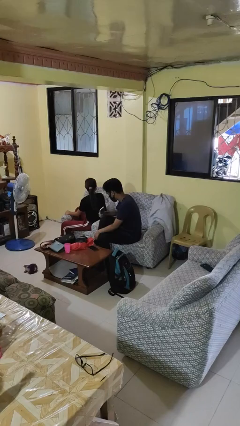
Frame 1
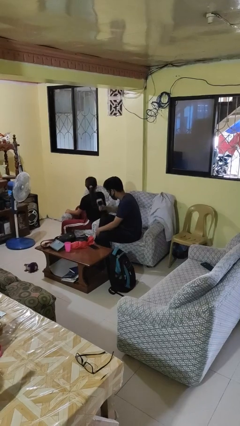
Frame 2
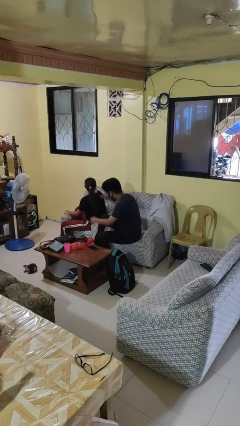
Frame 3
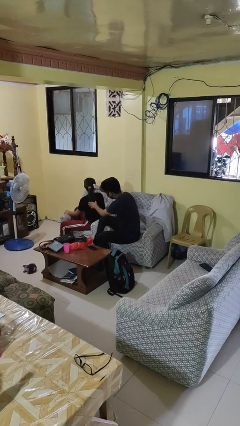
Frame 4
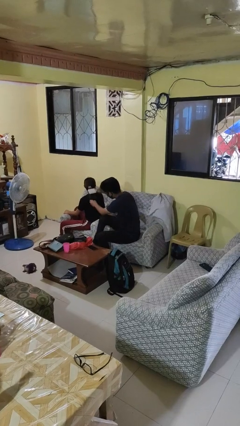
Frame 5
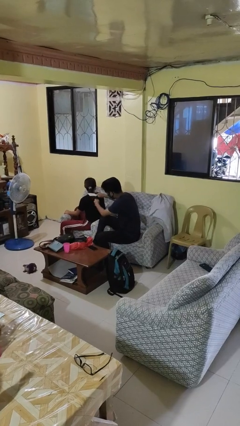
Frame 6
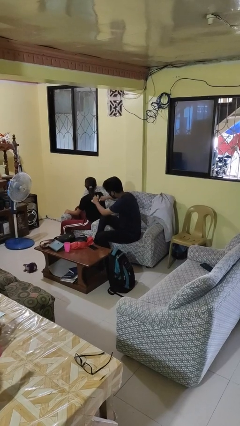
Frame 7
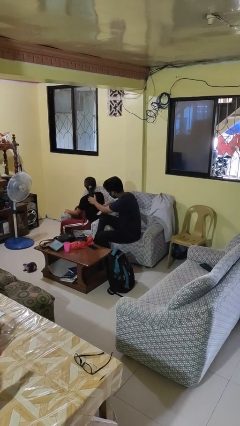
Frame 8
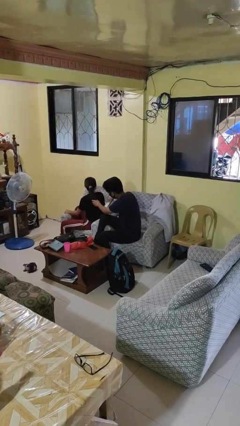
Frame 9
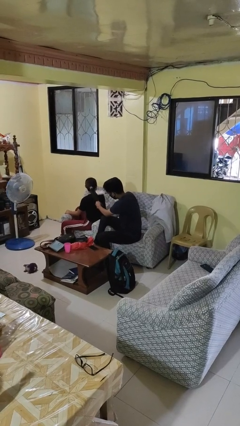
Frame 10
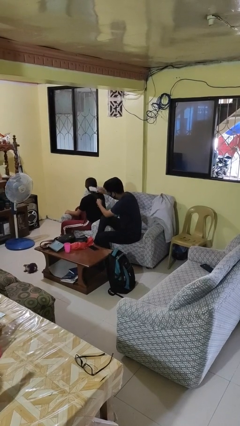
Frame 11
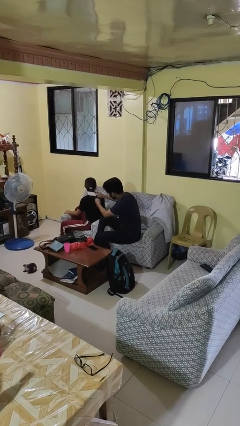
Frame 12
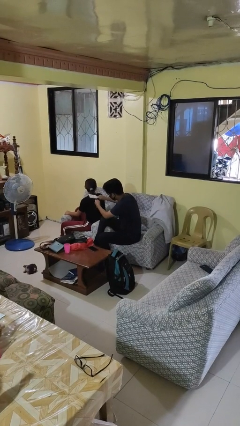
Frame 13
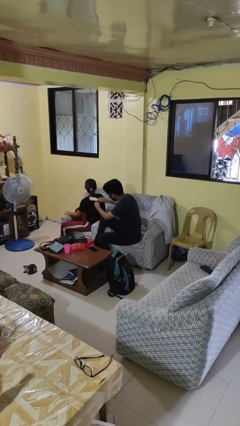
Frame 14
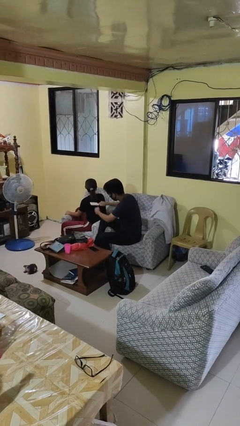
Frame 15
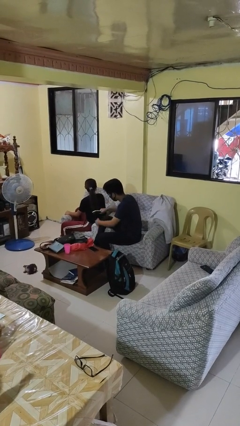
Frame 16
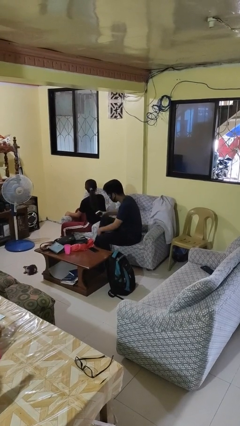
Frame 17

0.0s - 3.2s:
person brushes hair of person

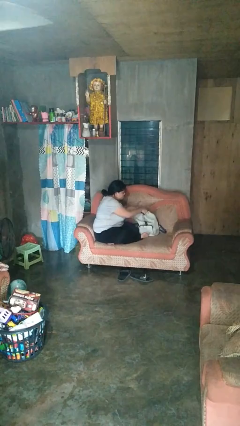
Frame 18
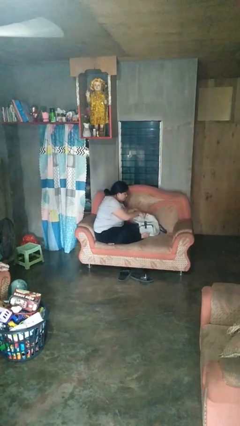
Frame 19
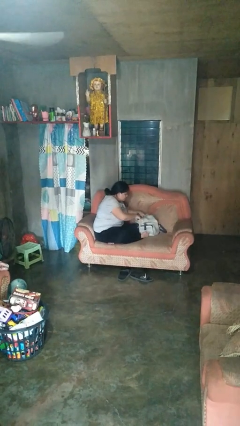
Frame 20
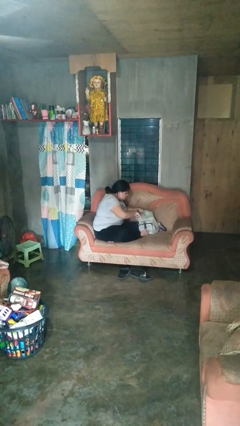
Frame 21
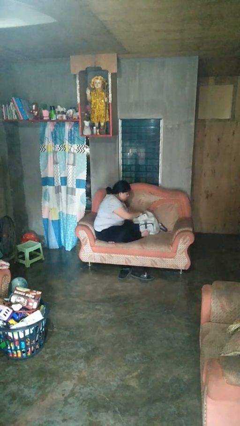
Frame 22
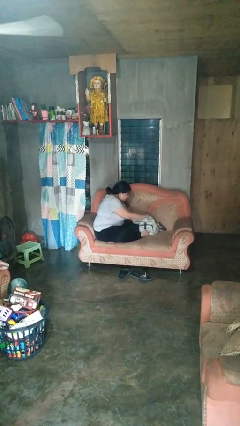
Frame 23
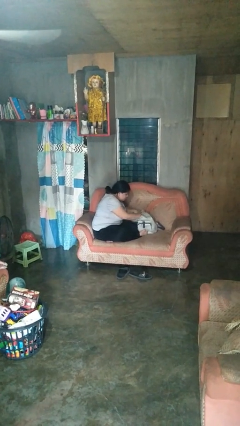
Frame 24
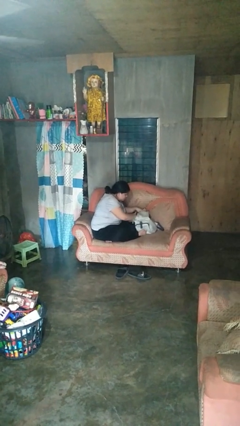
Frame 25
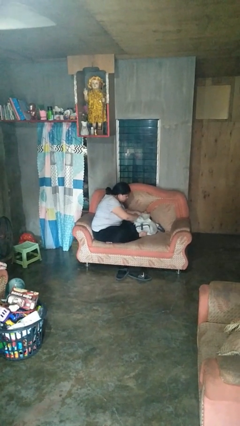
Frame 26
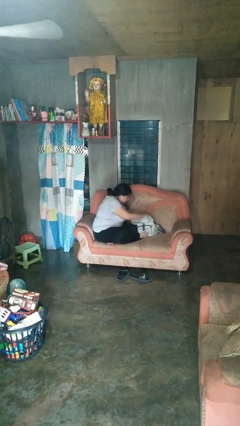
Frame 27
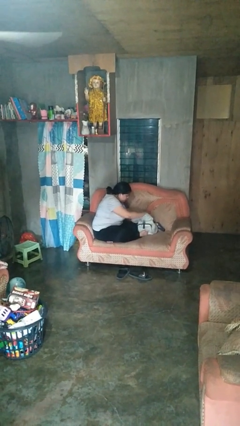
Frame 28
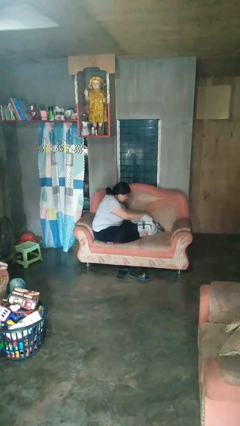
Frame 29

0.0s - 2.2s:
person searches in backpack

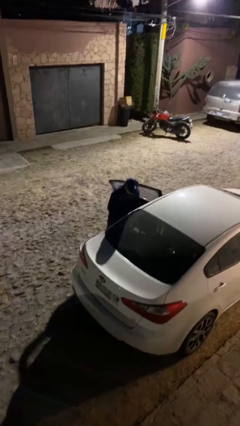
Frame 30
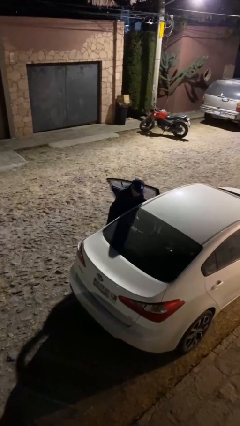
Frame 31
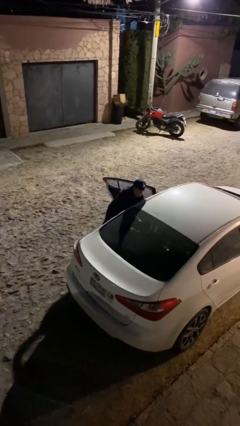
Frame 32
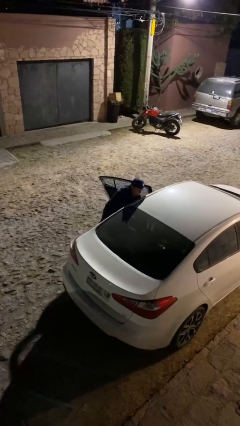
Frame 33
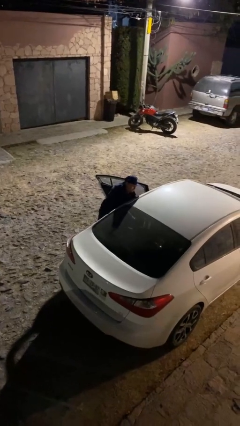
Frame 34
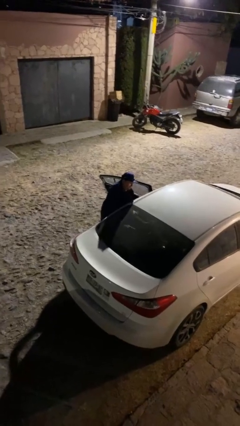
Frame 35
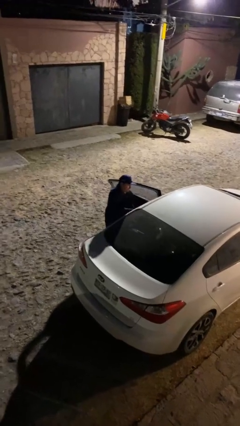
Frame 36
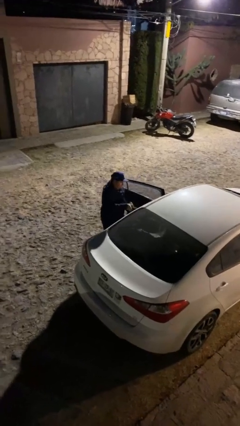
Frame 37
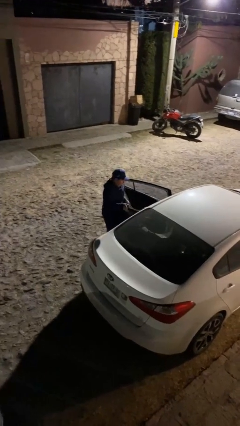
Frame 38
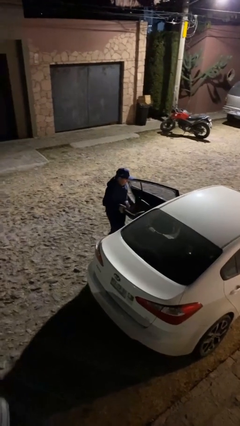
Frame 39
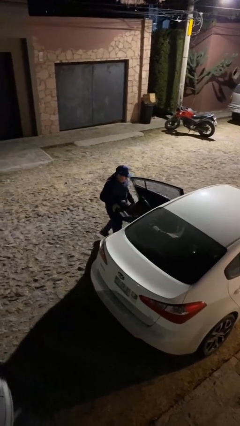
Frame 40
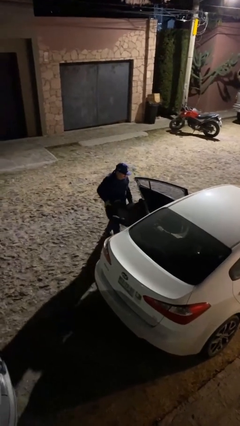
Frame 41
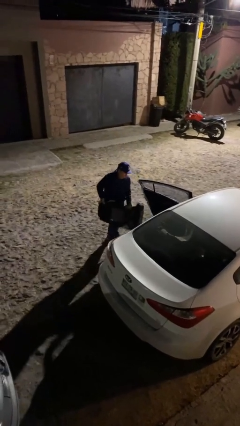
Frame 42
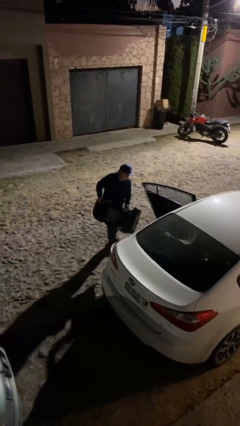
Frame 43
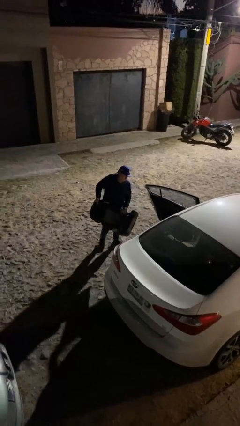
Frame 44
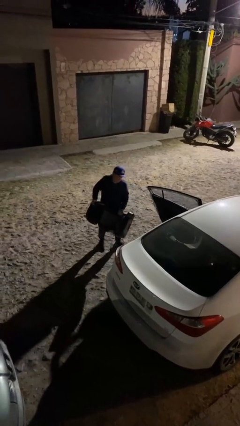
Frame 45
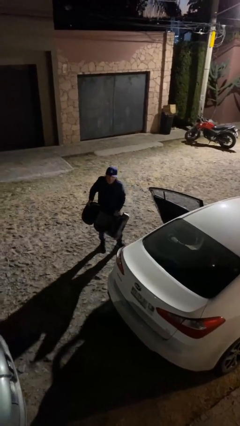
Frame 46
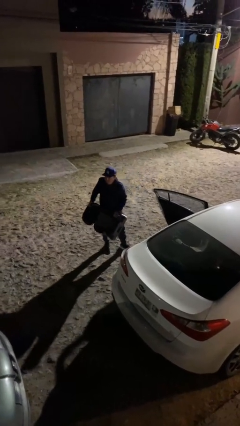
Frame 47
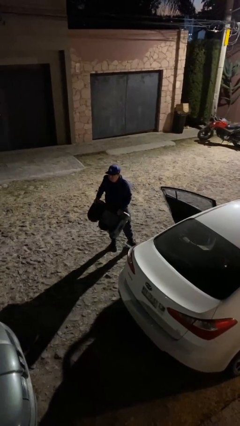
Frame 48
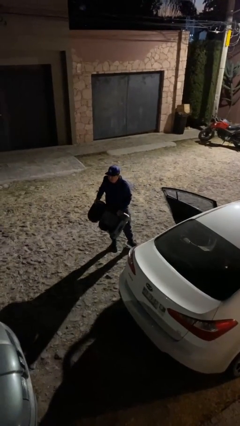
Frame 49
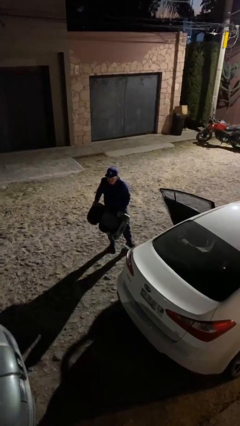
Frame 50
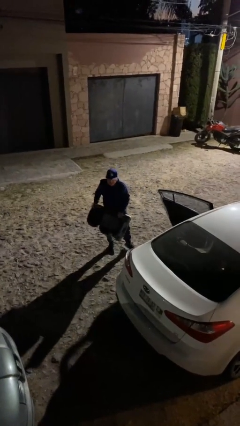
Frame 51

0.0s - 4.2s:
person unloads car

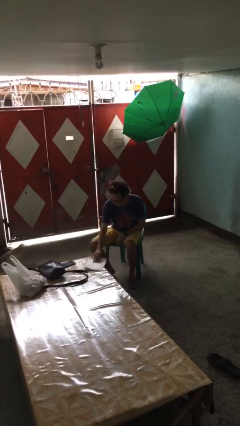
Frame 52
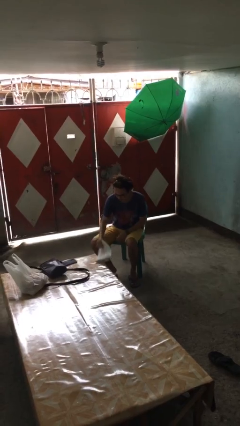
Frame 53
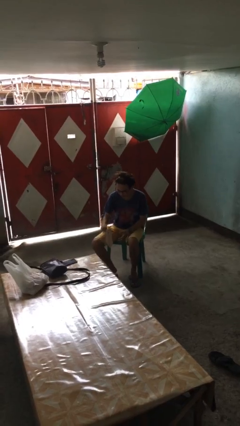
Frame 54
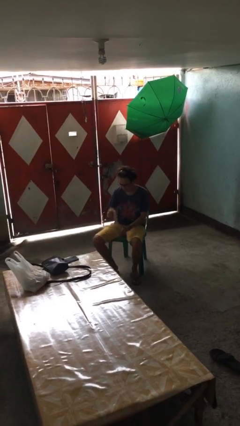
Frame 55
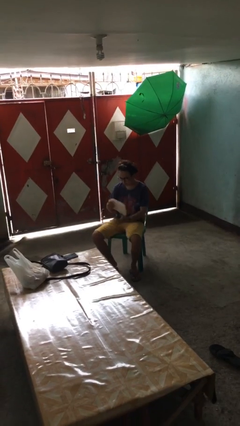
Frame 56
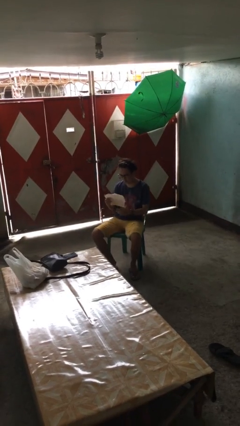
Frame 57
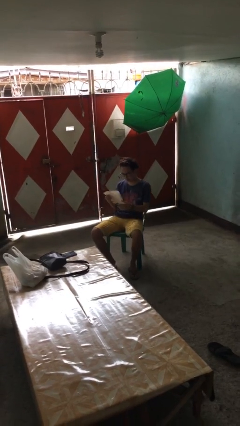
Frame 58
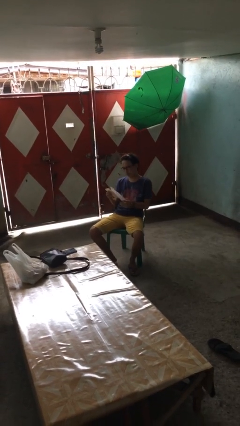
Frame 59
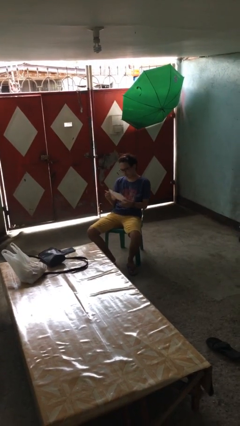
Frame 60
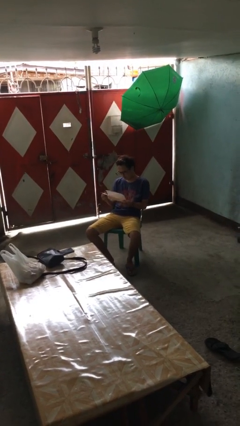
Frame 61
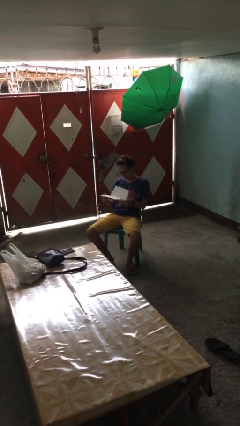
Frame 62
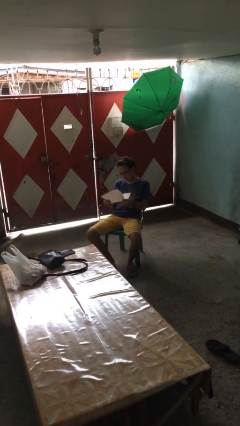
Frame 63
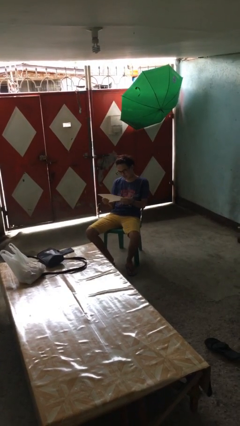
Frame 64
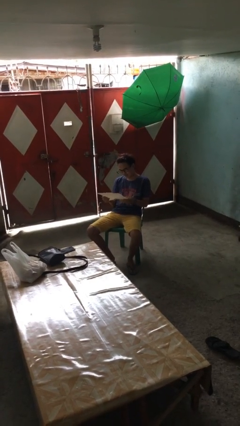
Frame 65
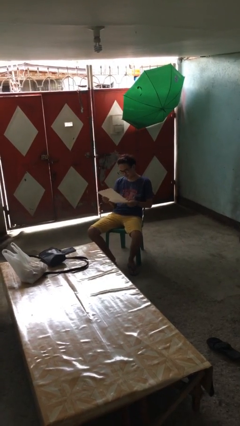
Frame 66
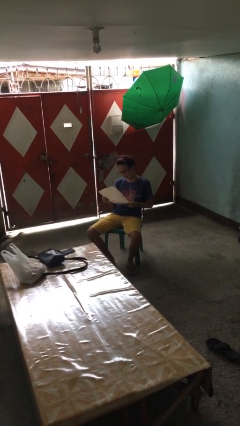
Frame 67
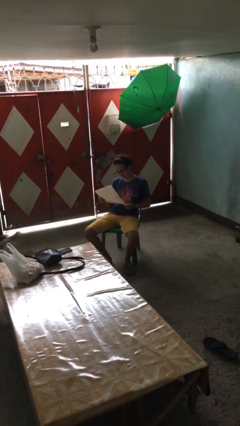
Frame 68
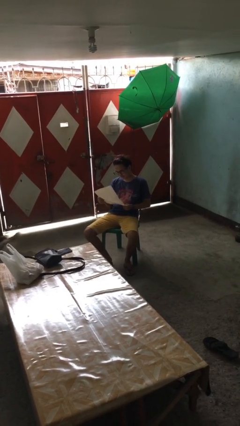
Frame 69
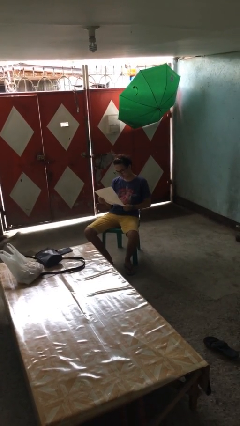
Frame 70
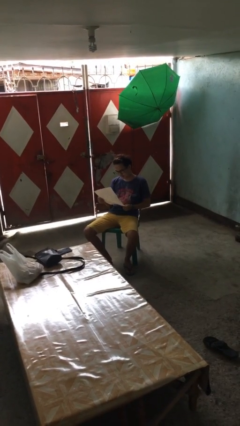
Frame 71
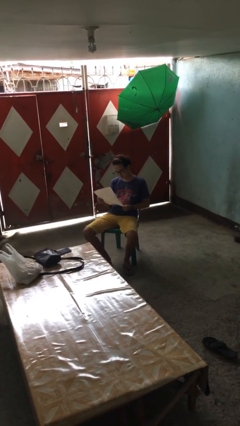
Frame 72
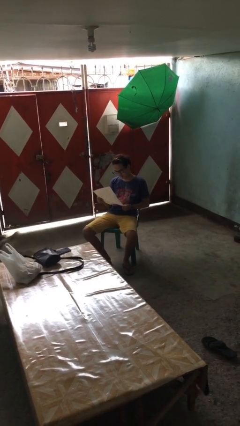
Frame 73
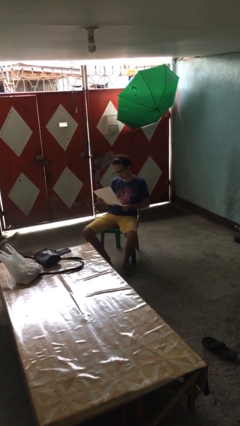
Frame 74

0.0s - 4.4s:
person reads document

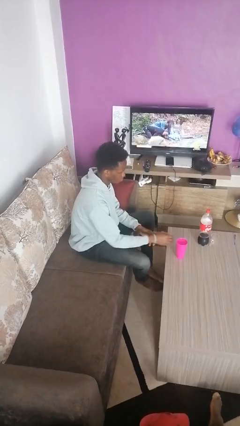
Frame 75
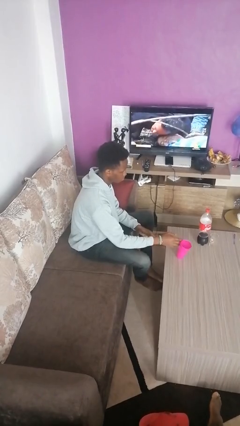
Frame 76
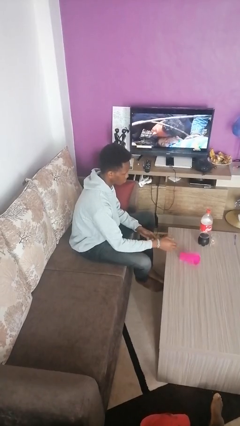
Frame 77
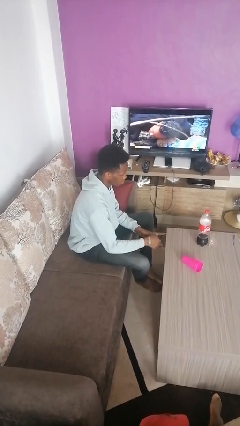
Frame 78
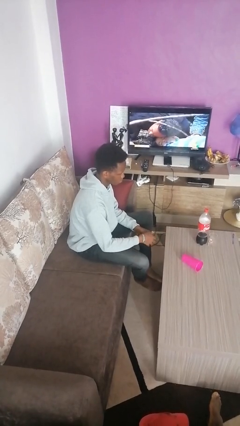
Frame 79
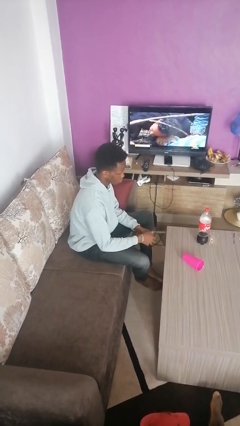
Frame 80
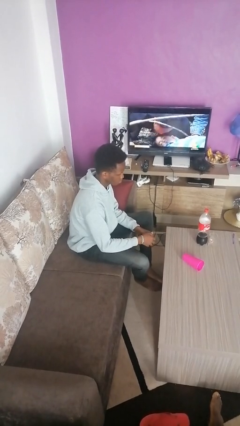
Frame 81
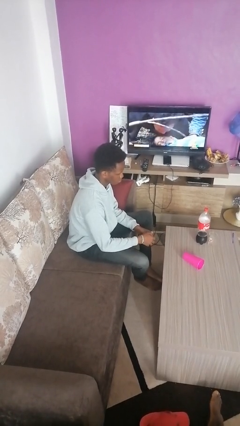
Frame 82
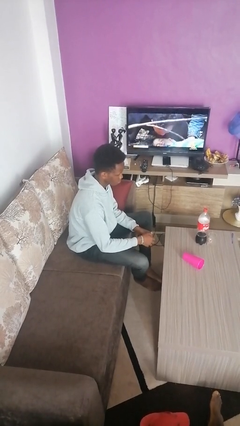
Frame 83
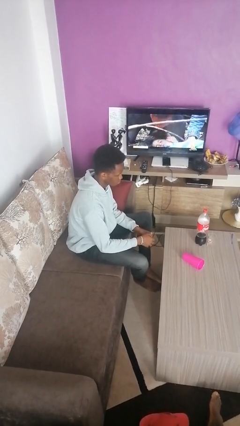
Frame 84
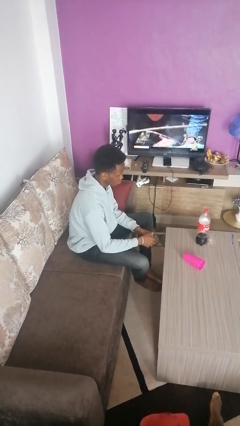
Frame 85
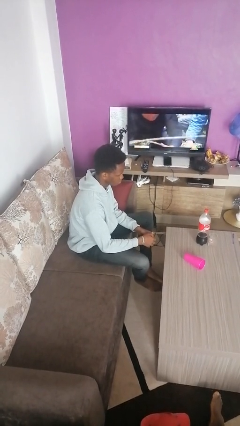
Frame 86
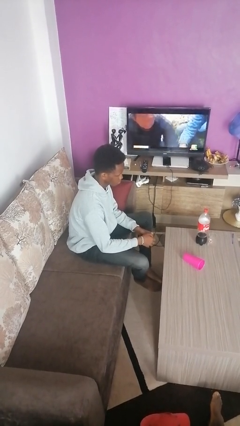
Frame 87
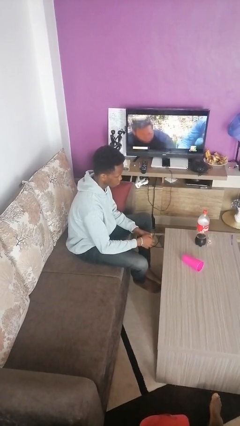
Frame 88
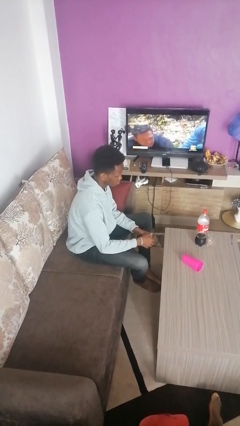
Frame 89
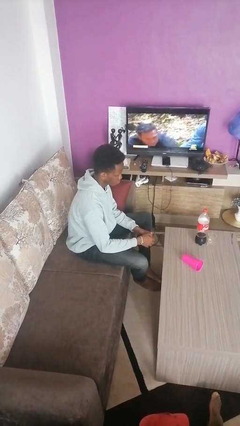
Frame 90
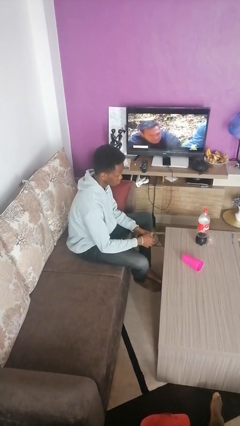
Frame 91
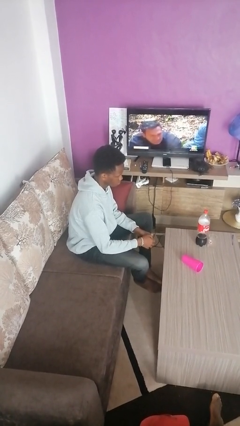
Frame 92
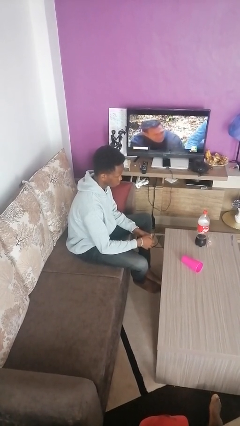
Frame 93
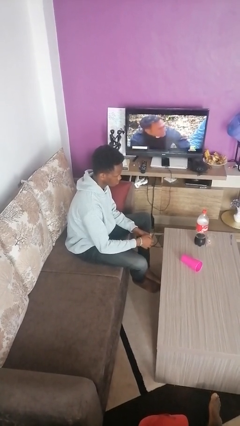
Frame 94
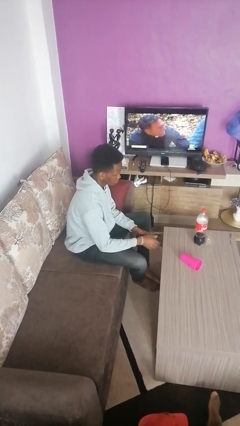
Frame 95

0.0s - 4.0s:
person knocks over glass
